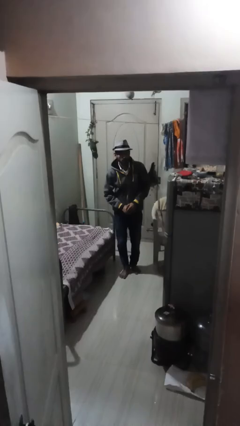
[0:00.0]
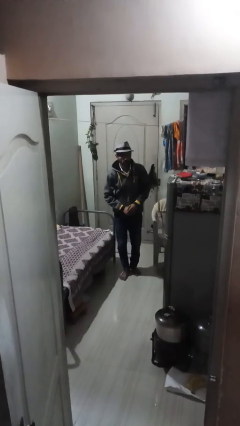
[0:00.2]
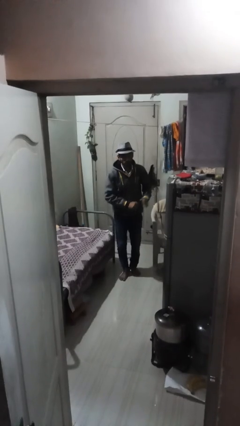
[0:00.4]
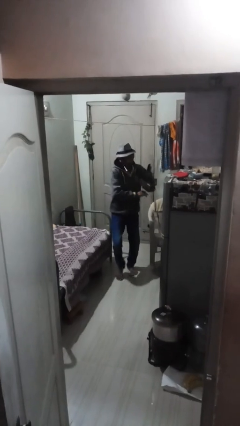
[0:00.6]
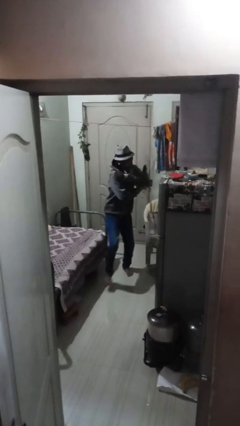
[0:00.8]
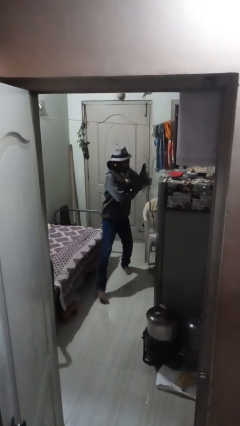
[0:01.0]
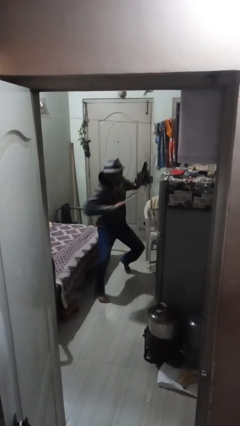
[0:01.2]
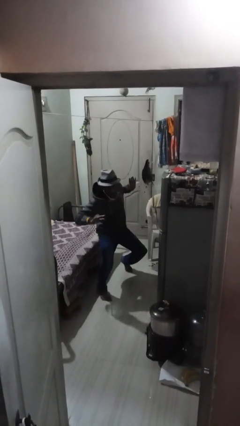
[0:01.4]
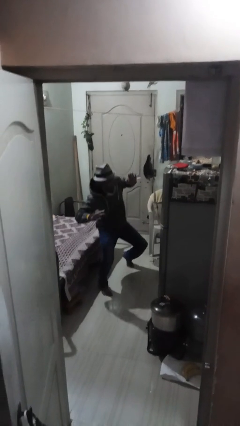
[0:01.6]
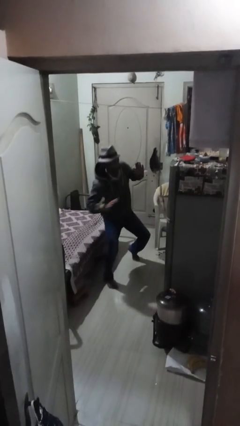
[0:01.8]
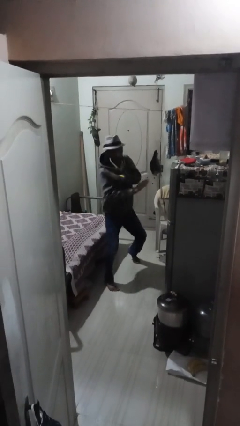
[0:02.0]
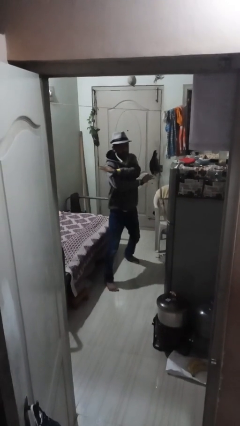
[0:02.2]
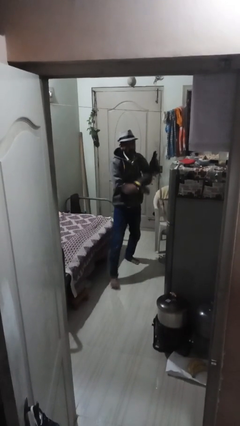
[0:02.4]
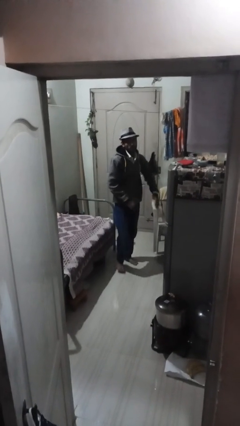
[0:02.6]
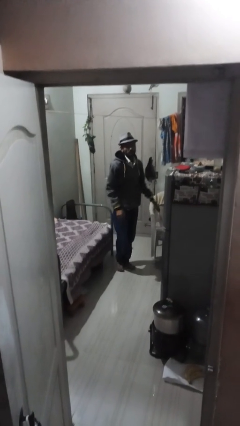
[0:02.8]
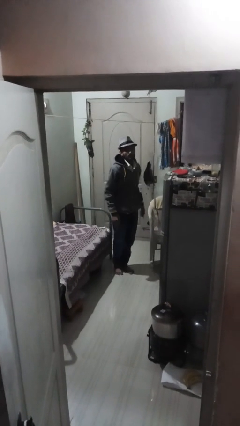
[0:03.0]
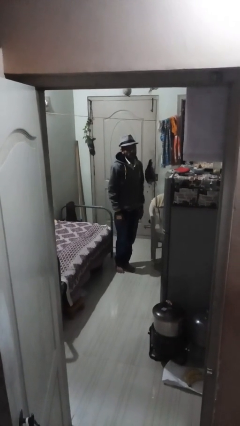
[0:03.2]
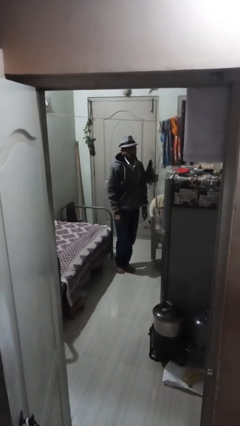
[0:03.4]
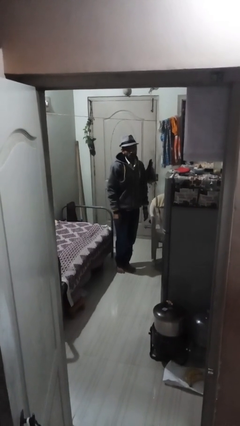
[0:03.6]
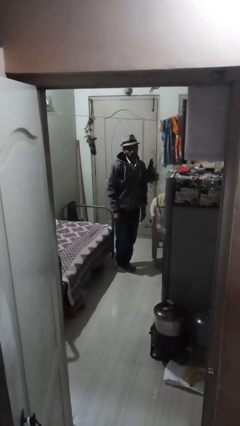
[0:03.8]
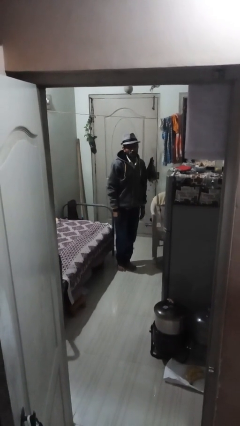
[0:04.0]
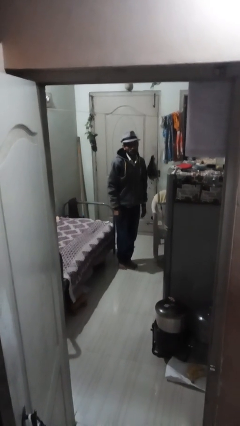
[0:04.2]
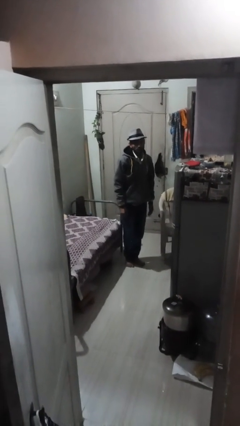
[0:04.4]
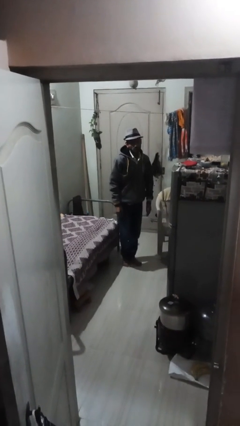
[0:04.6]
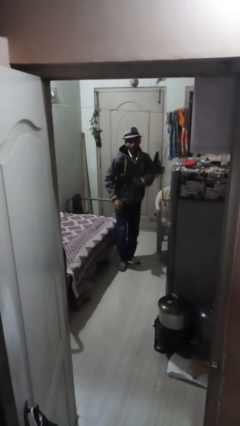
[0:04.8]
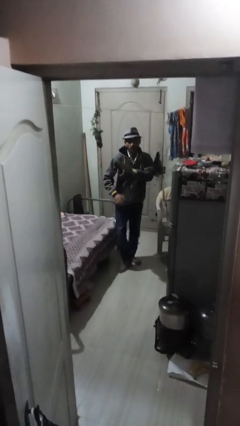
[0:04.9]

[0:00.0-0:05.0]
person karate chop

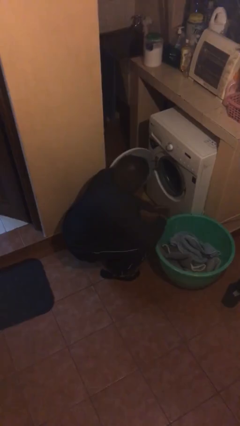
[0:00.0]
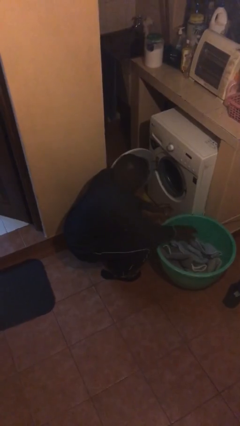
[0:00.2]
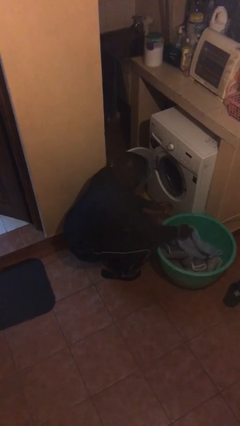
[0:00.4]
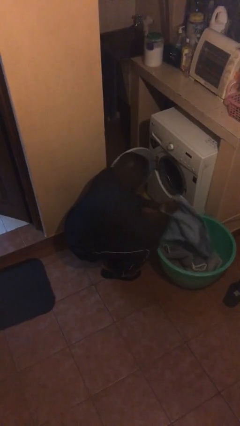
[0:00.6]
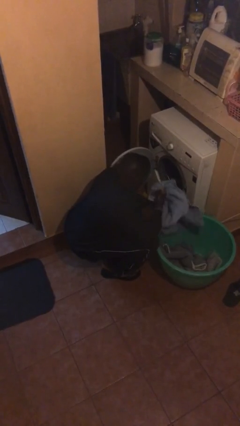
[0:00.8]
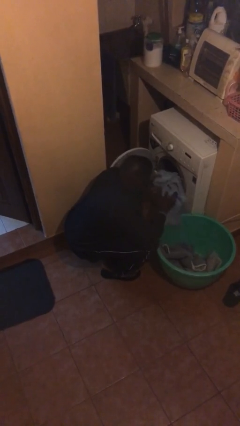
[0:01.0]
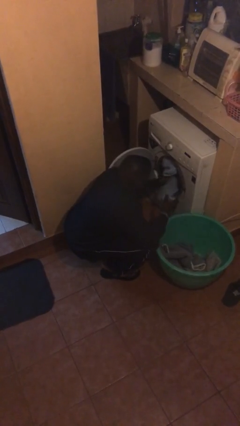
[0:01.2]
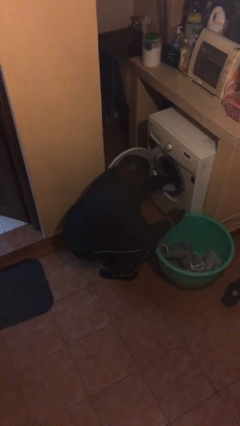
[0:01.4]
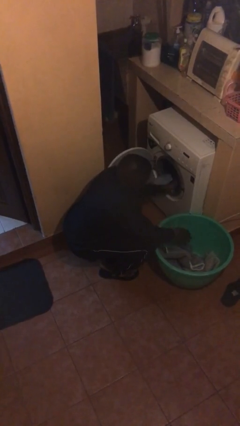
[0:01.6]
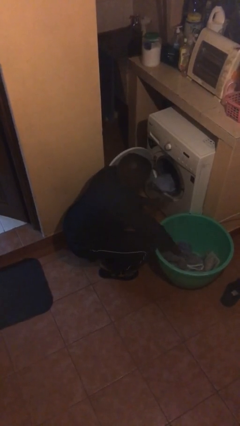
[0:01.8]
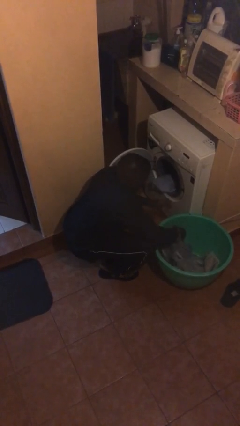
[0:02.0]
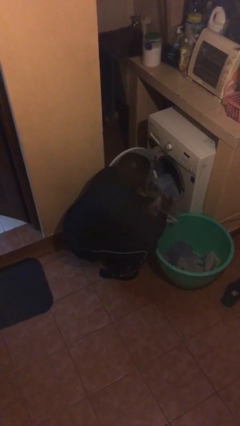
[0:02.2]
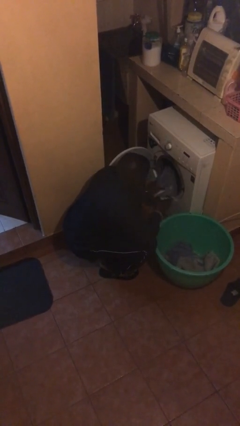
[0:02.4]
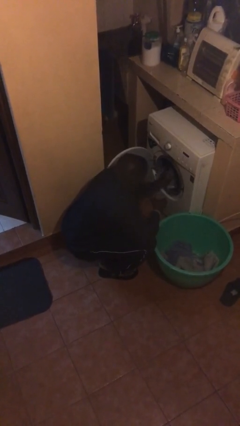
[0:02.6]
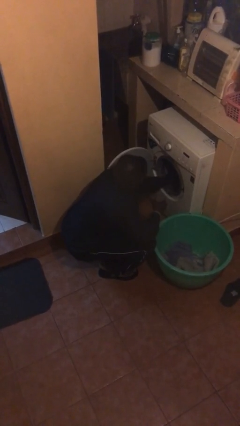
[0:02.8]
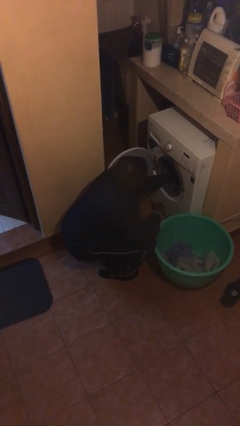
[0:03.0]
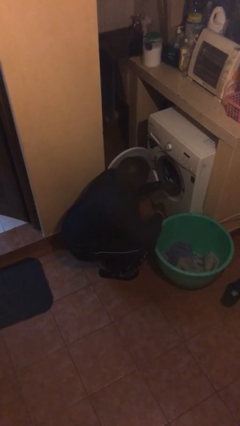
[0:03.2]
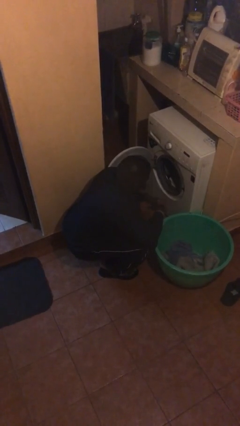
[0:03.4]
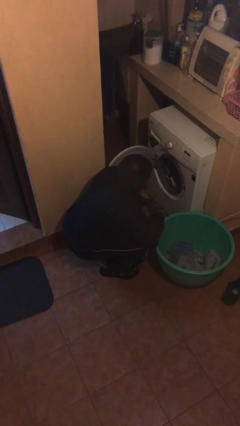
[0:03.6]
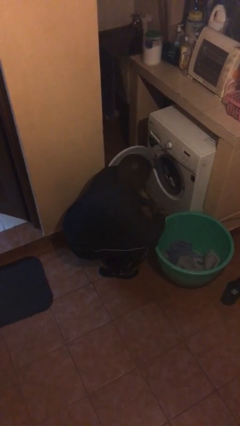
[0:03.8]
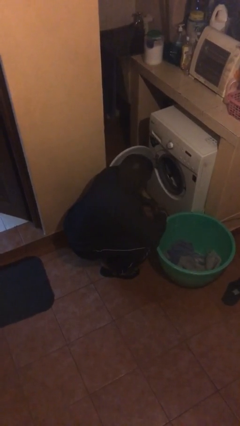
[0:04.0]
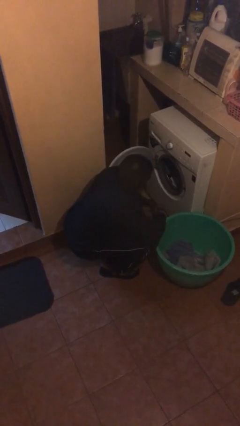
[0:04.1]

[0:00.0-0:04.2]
person loads clotheswasher

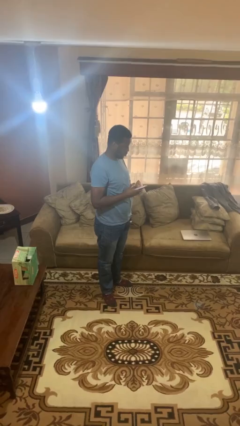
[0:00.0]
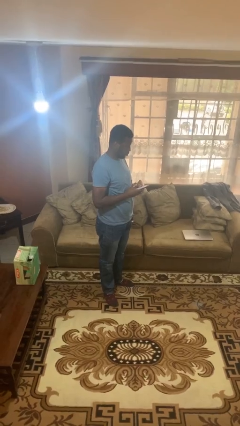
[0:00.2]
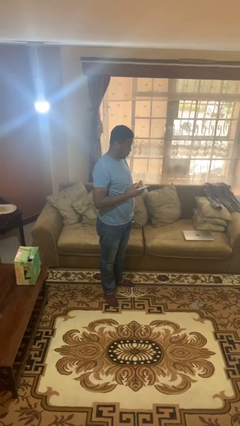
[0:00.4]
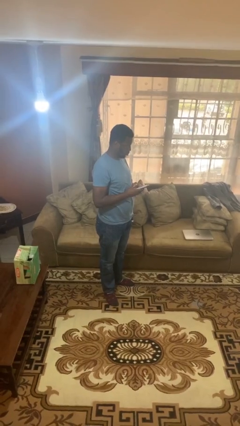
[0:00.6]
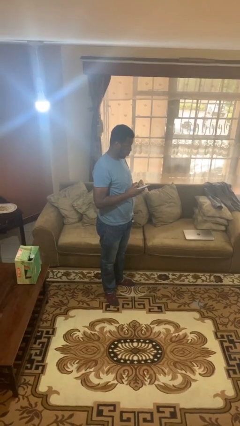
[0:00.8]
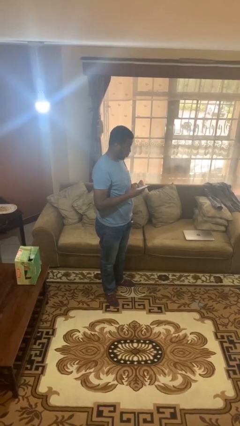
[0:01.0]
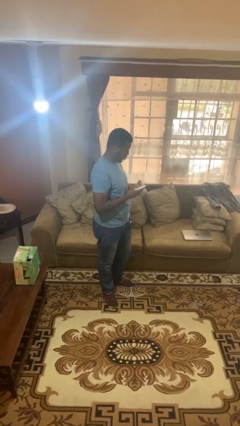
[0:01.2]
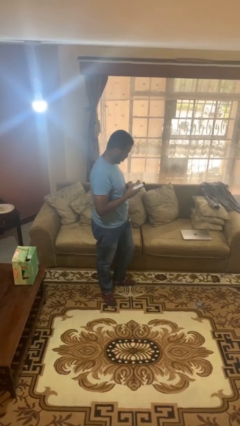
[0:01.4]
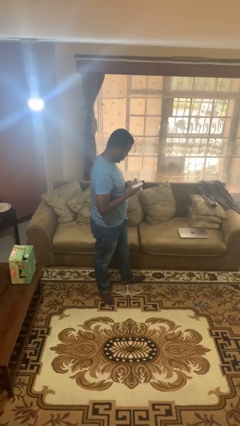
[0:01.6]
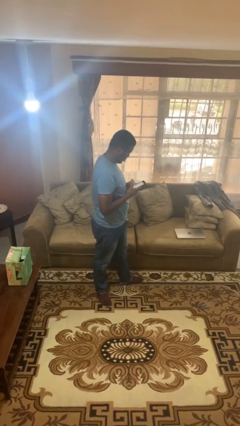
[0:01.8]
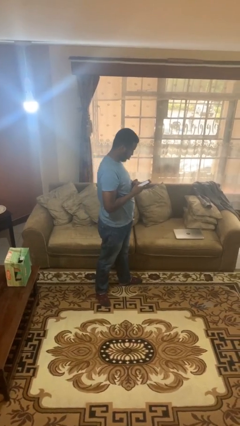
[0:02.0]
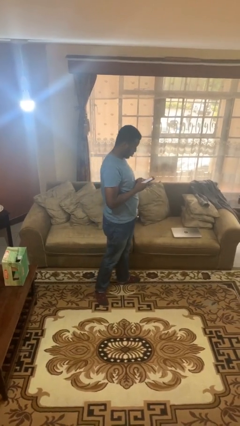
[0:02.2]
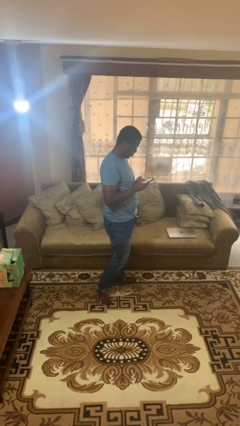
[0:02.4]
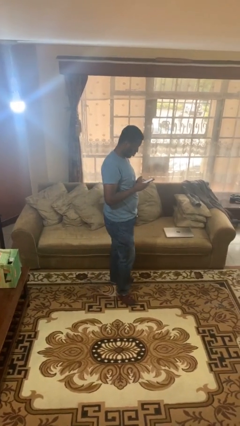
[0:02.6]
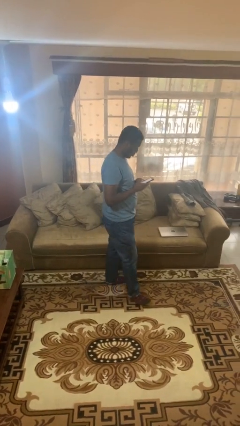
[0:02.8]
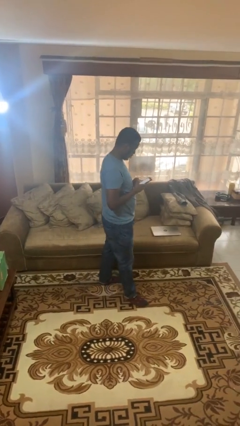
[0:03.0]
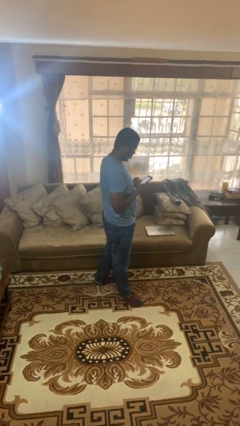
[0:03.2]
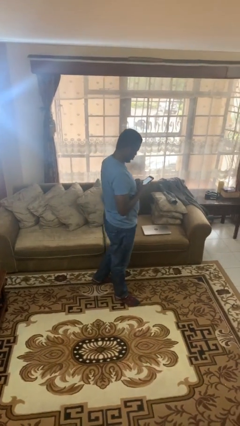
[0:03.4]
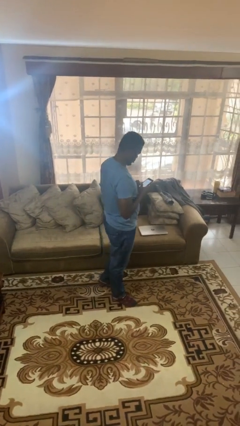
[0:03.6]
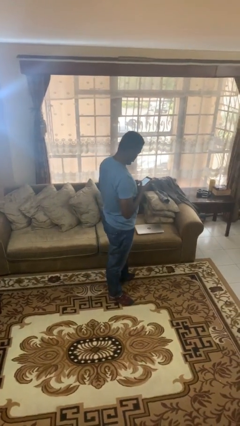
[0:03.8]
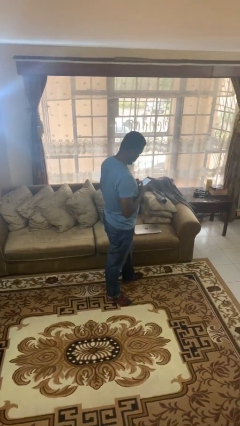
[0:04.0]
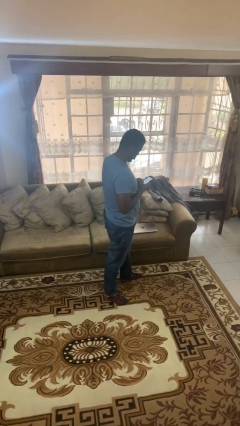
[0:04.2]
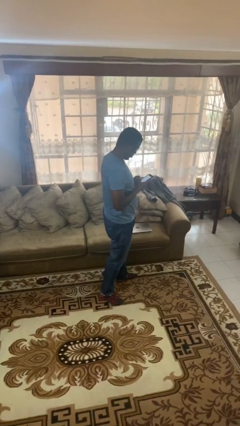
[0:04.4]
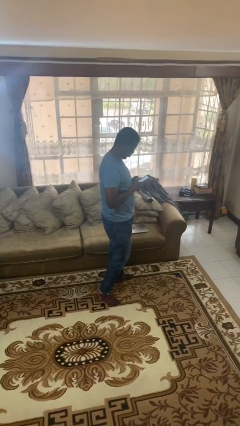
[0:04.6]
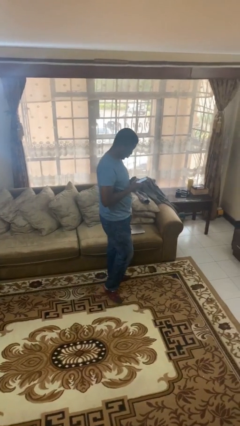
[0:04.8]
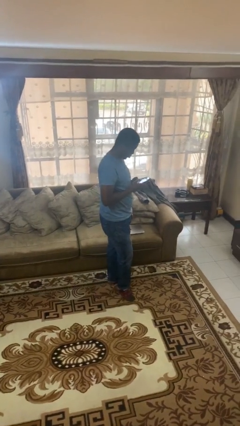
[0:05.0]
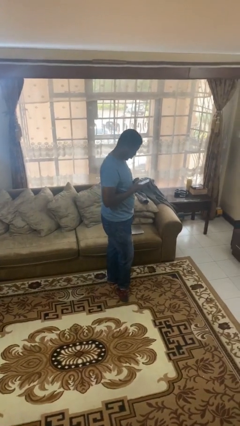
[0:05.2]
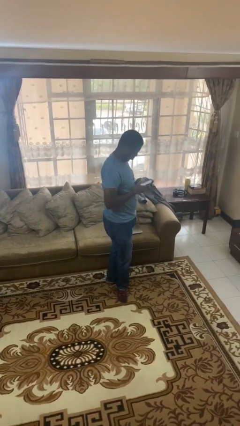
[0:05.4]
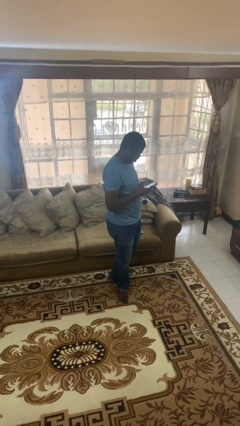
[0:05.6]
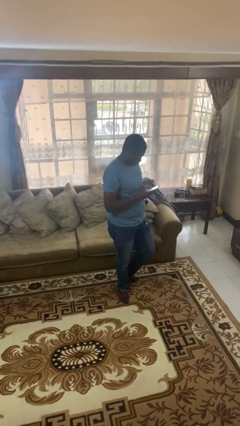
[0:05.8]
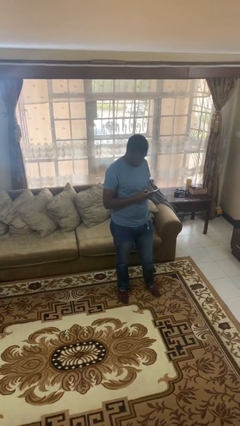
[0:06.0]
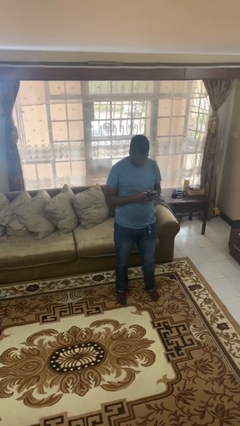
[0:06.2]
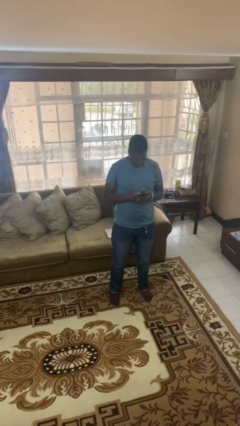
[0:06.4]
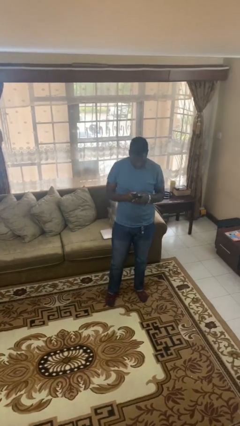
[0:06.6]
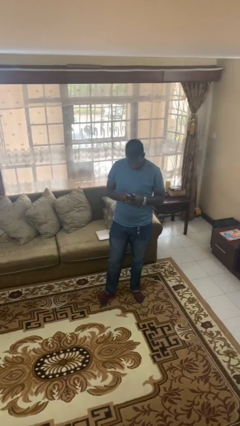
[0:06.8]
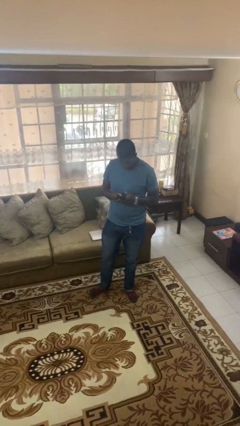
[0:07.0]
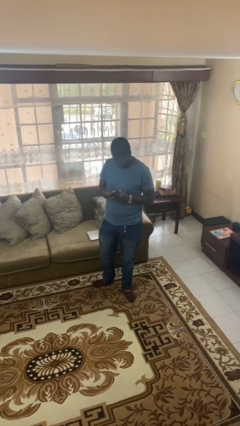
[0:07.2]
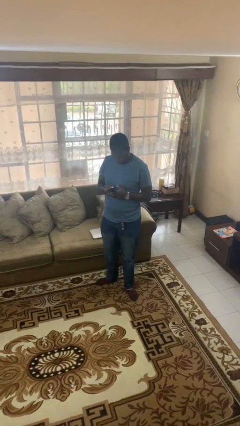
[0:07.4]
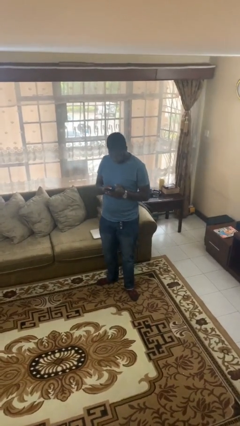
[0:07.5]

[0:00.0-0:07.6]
person texts on phone

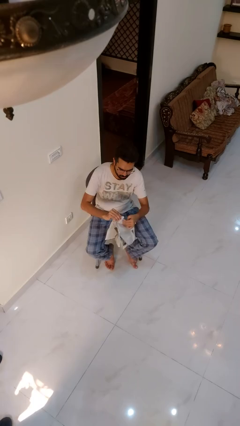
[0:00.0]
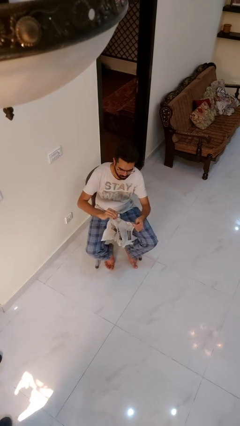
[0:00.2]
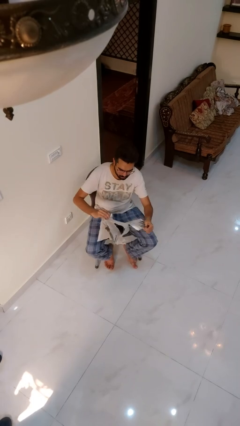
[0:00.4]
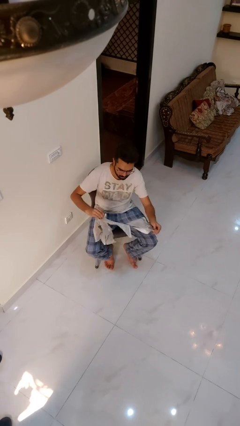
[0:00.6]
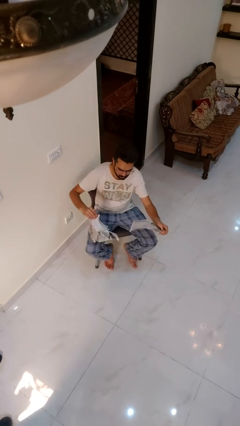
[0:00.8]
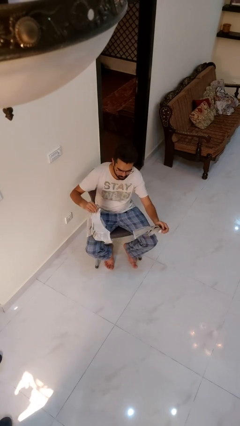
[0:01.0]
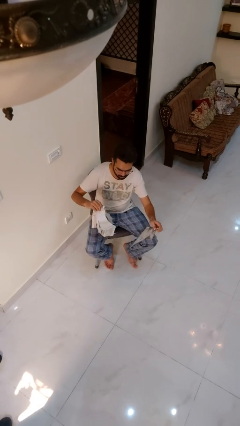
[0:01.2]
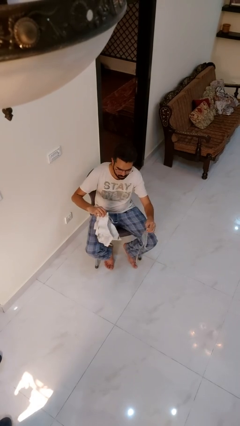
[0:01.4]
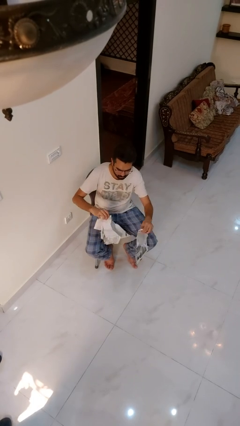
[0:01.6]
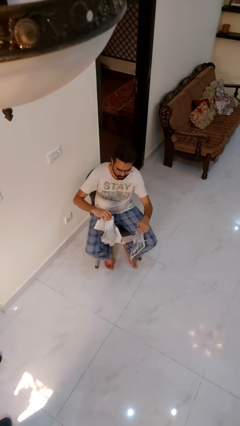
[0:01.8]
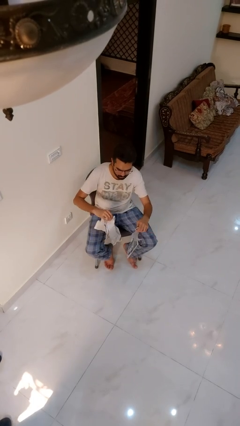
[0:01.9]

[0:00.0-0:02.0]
person tears paper
